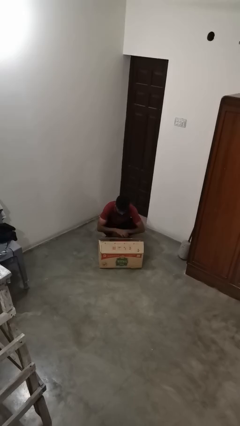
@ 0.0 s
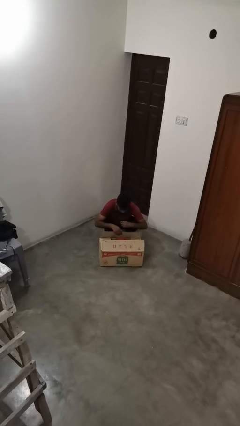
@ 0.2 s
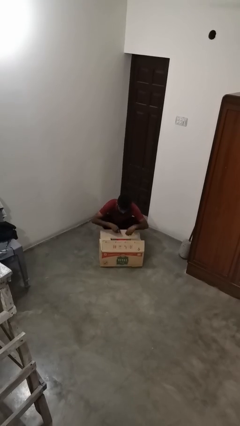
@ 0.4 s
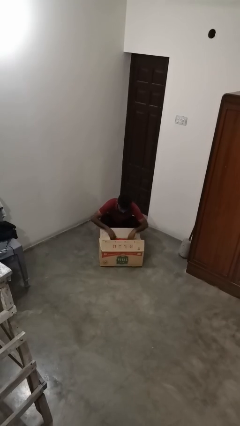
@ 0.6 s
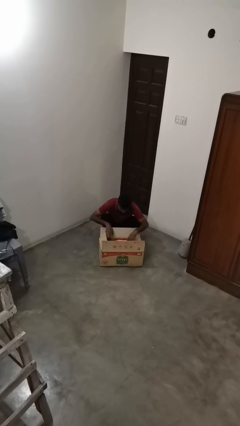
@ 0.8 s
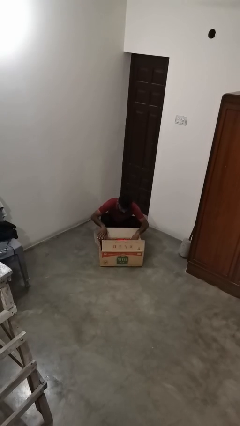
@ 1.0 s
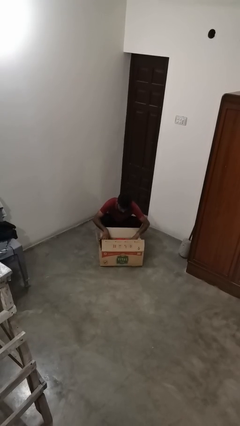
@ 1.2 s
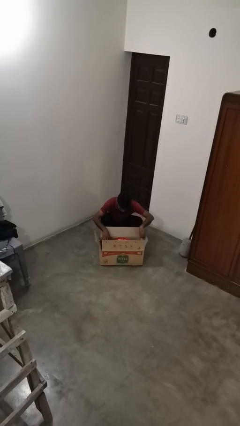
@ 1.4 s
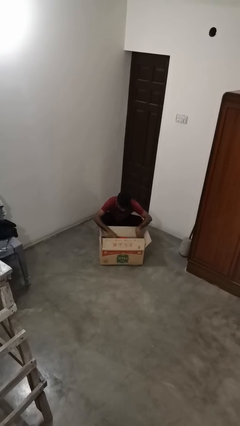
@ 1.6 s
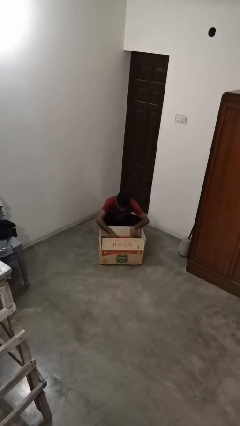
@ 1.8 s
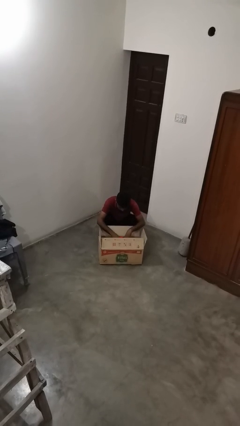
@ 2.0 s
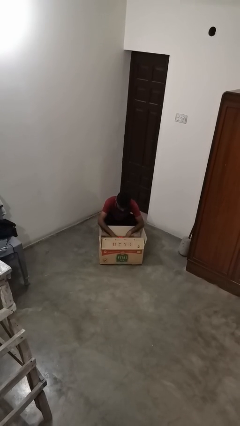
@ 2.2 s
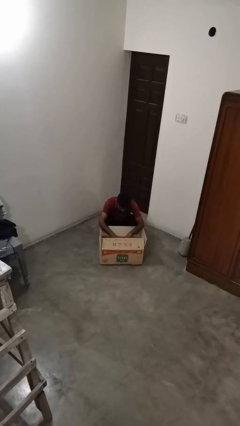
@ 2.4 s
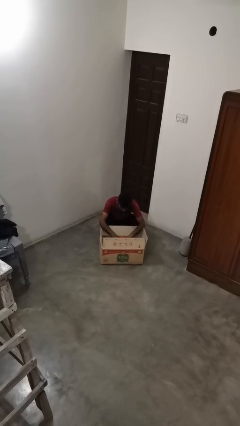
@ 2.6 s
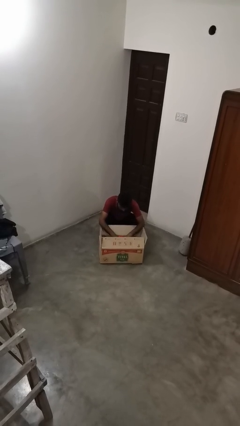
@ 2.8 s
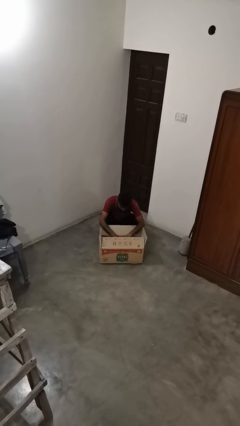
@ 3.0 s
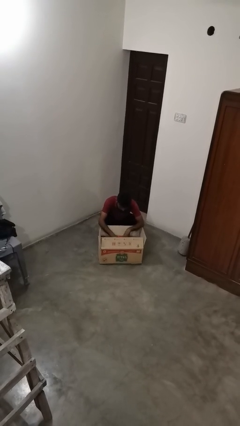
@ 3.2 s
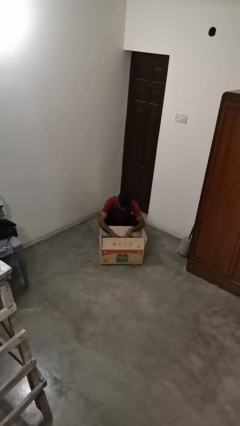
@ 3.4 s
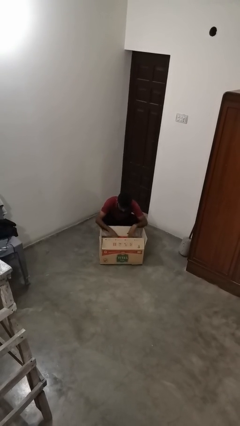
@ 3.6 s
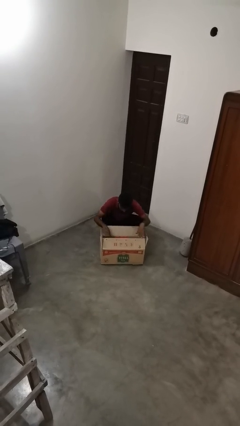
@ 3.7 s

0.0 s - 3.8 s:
person searches in box

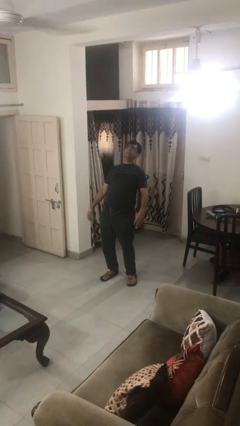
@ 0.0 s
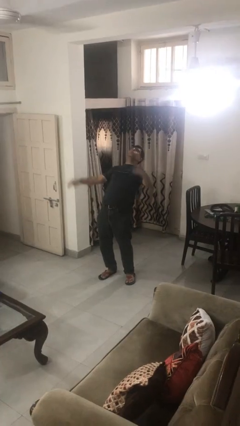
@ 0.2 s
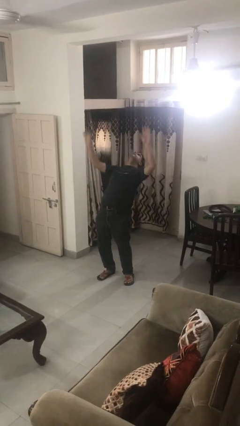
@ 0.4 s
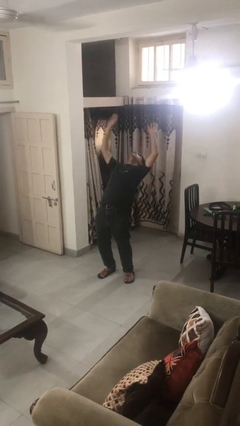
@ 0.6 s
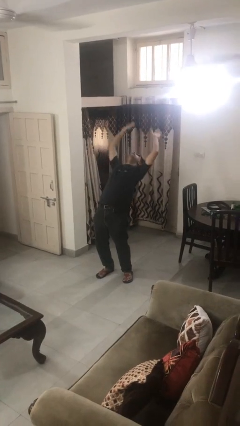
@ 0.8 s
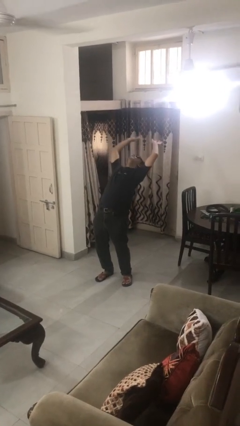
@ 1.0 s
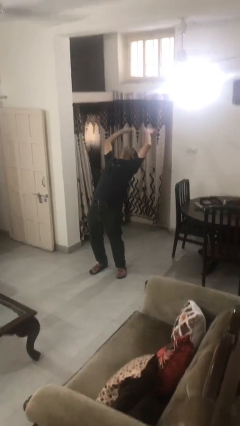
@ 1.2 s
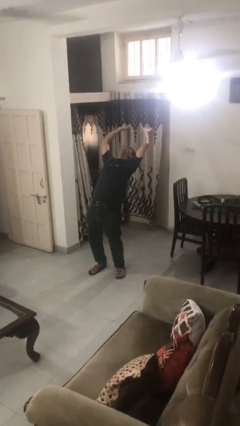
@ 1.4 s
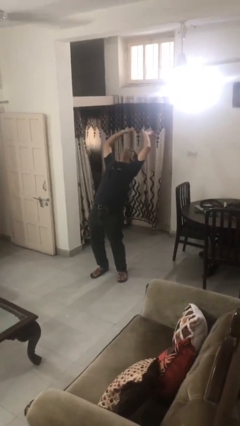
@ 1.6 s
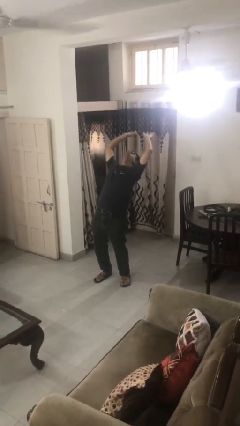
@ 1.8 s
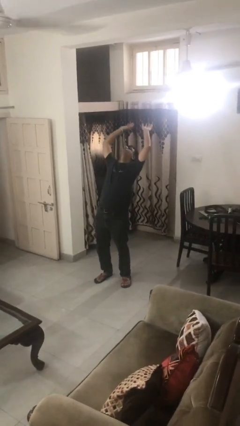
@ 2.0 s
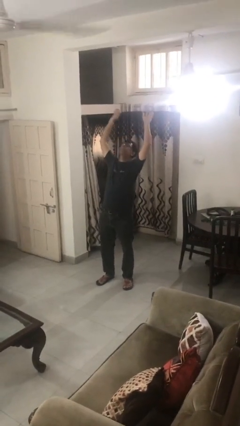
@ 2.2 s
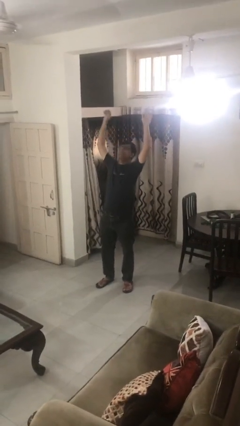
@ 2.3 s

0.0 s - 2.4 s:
person stretches back

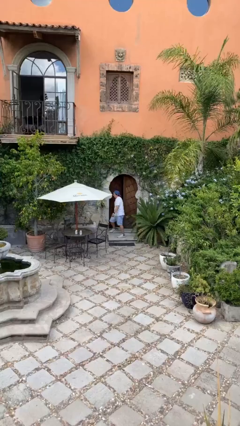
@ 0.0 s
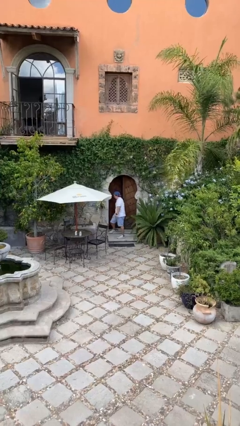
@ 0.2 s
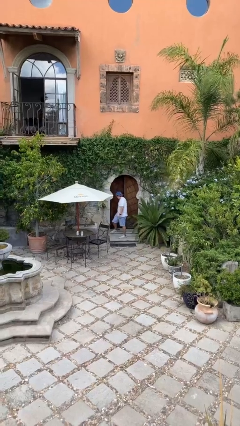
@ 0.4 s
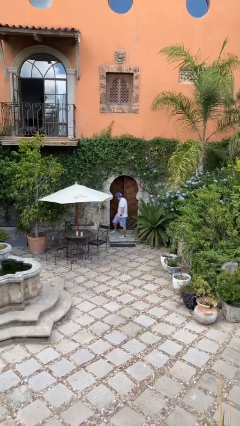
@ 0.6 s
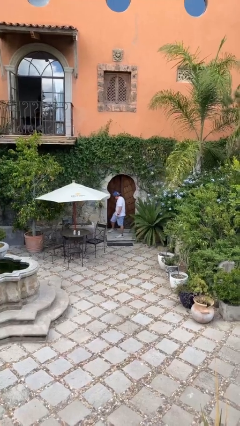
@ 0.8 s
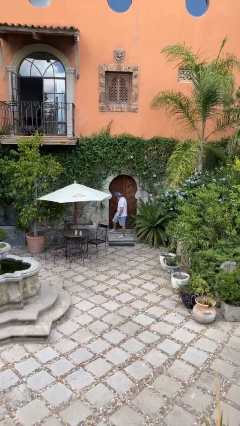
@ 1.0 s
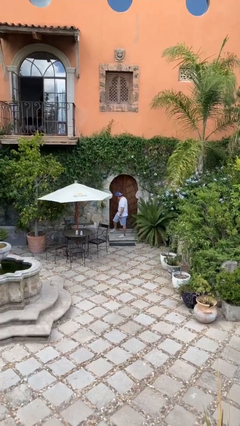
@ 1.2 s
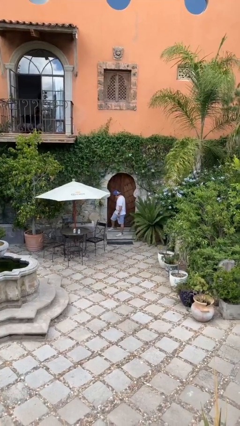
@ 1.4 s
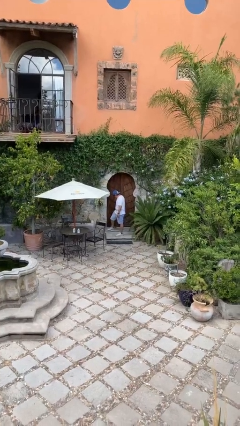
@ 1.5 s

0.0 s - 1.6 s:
person closes facility door

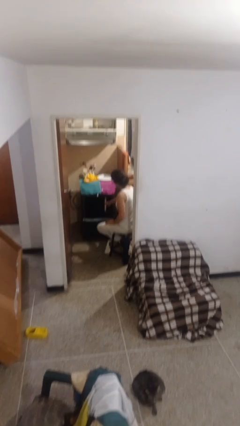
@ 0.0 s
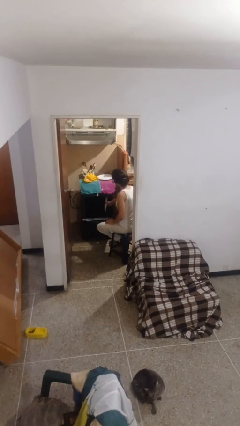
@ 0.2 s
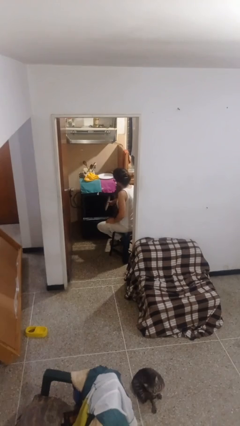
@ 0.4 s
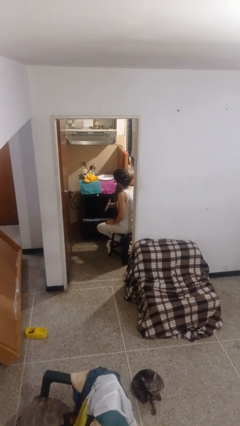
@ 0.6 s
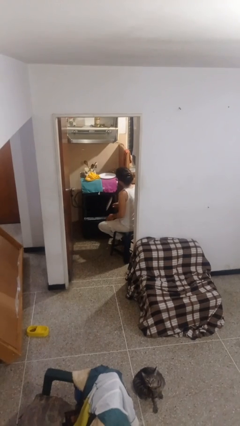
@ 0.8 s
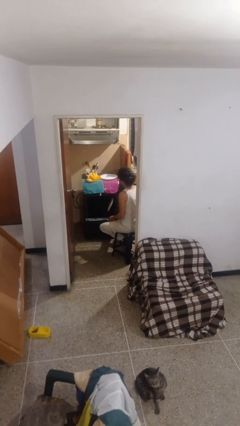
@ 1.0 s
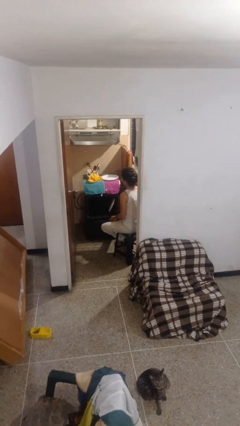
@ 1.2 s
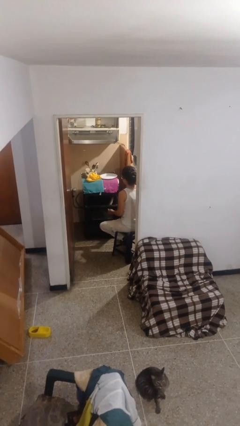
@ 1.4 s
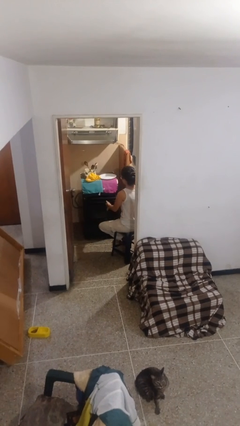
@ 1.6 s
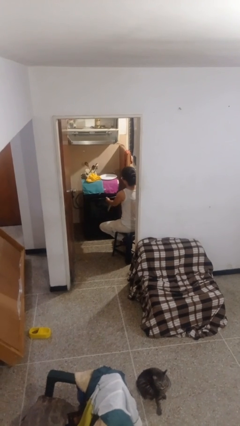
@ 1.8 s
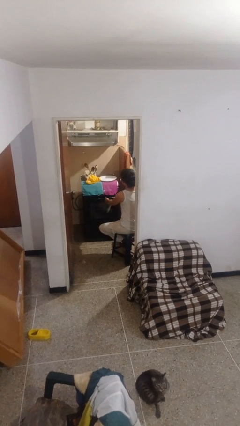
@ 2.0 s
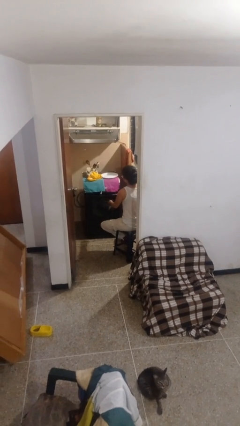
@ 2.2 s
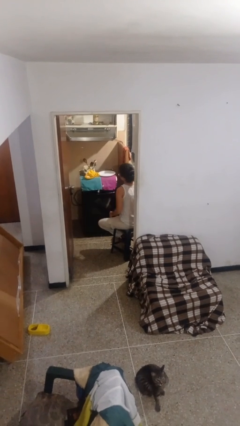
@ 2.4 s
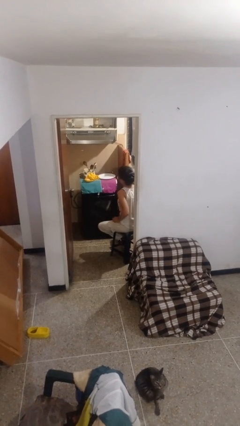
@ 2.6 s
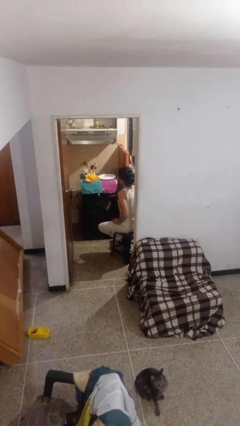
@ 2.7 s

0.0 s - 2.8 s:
person closes dishwasher

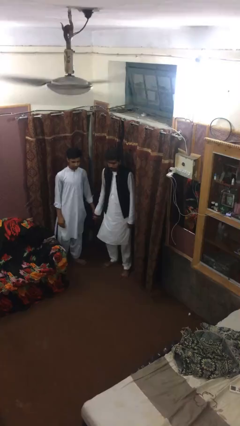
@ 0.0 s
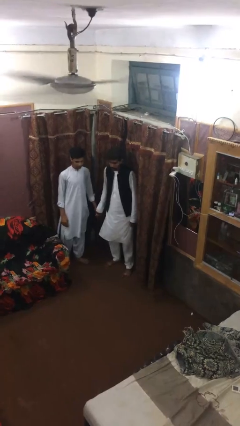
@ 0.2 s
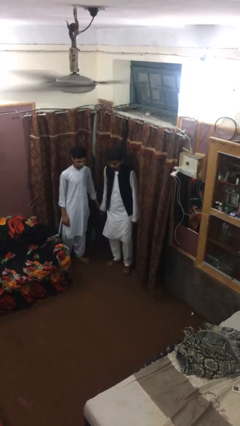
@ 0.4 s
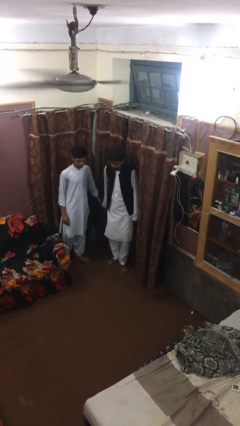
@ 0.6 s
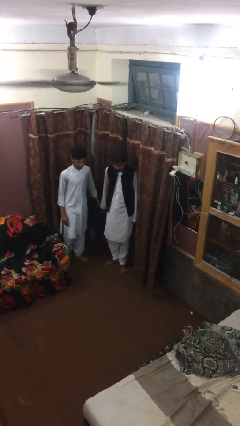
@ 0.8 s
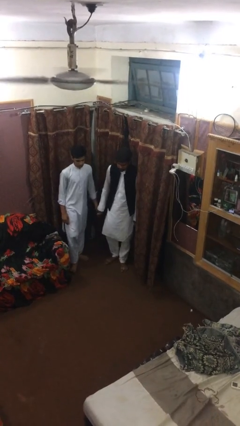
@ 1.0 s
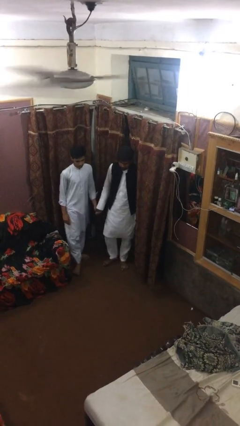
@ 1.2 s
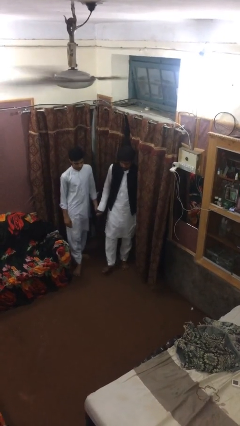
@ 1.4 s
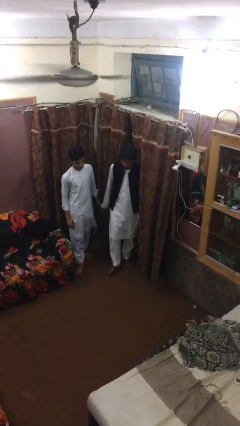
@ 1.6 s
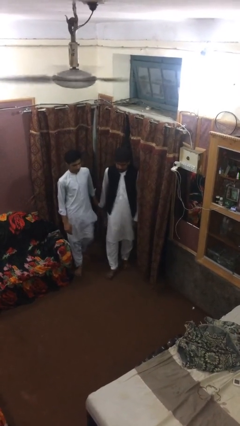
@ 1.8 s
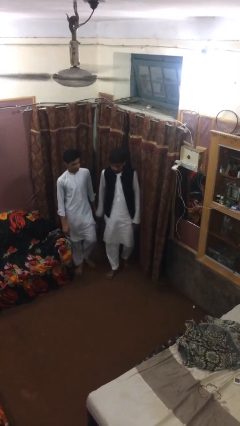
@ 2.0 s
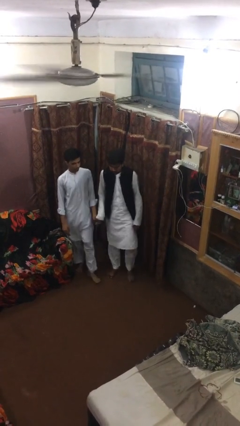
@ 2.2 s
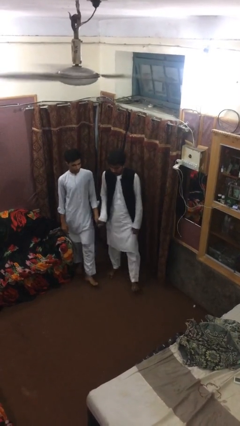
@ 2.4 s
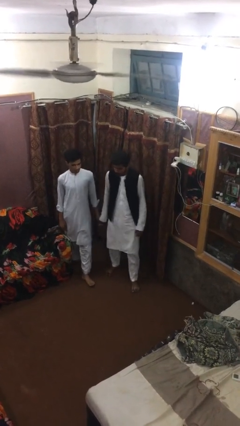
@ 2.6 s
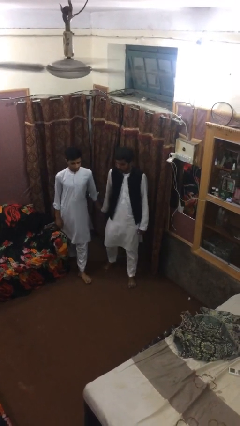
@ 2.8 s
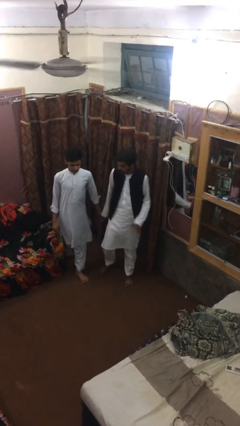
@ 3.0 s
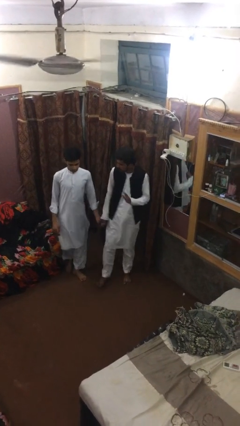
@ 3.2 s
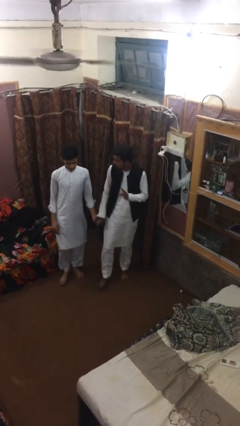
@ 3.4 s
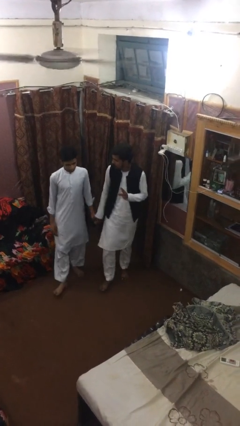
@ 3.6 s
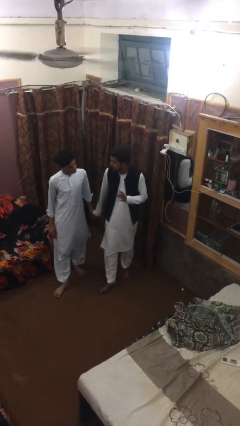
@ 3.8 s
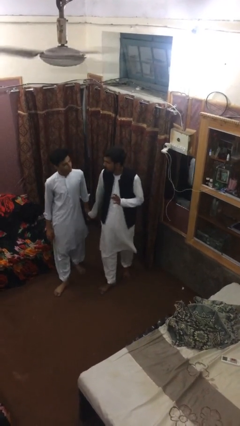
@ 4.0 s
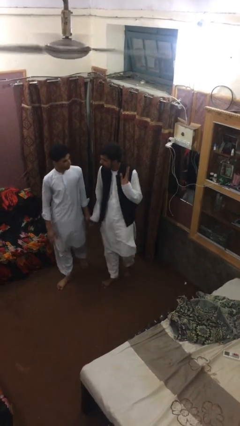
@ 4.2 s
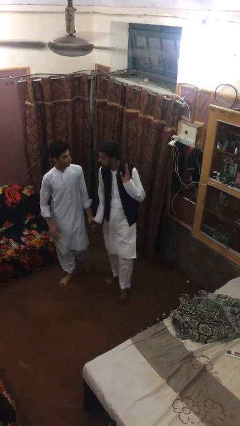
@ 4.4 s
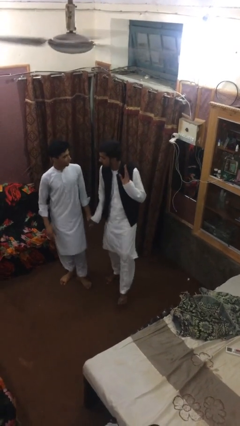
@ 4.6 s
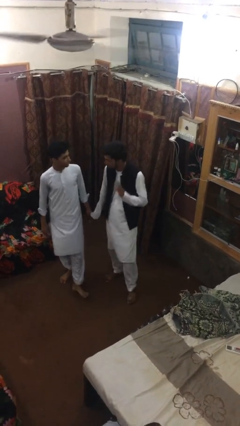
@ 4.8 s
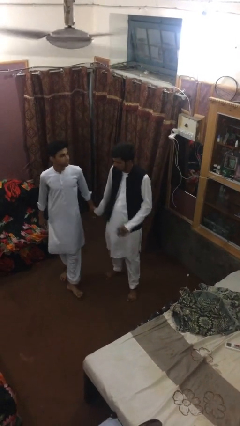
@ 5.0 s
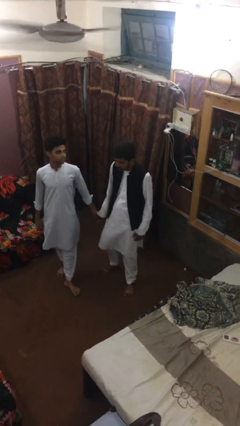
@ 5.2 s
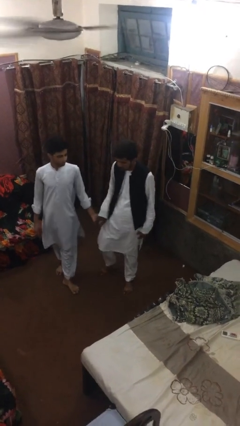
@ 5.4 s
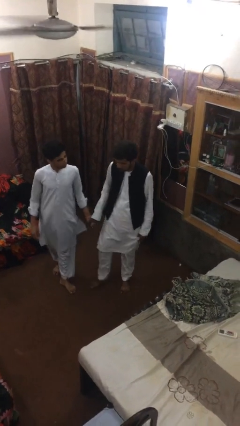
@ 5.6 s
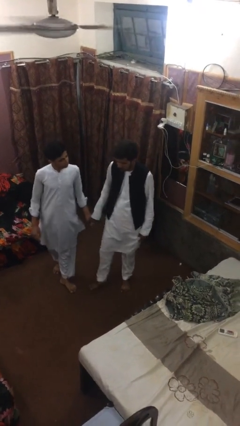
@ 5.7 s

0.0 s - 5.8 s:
person holds hand

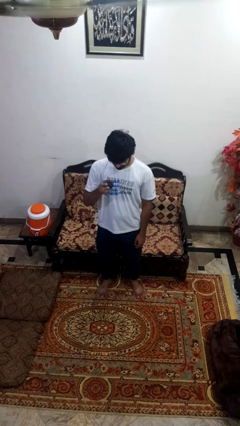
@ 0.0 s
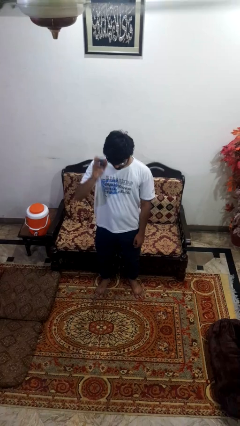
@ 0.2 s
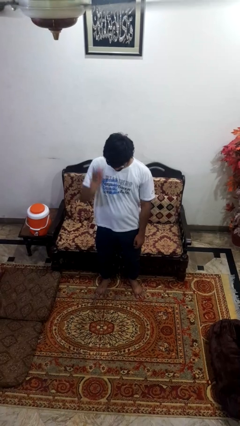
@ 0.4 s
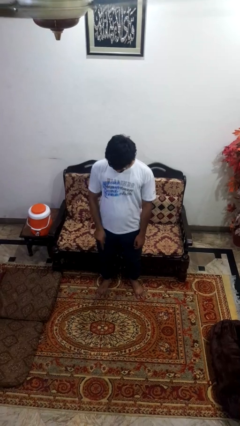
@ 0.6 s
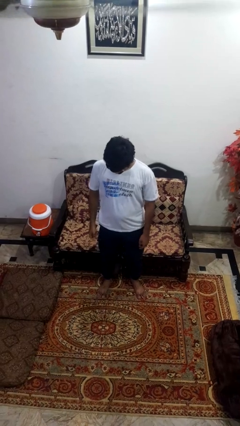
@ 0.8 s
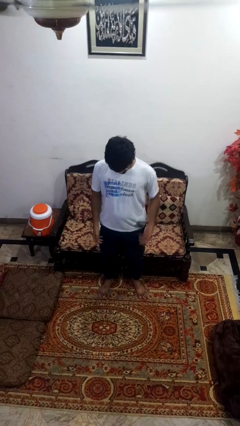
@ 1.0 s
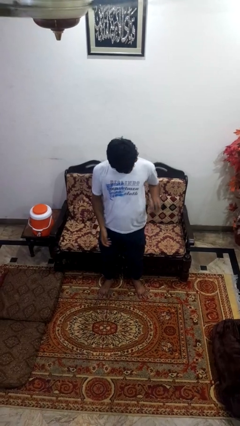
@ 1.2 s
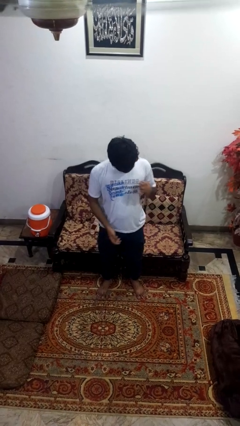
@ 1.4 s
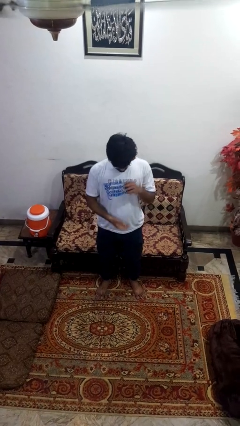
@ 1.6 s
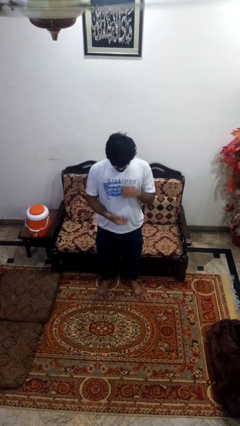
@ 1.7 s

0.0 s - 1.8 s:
person bounces ball on floor
